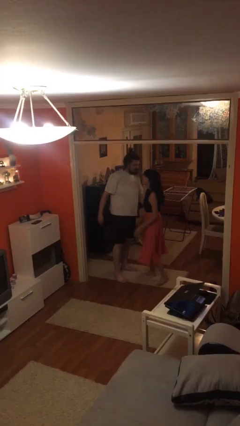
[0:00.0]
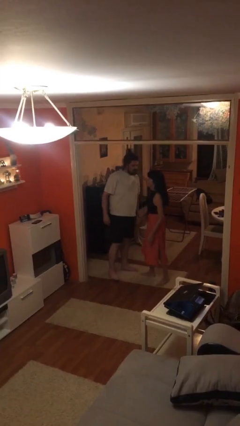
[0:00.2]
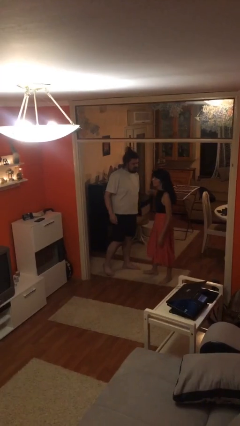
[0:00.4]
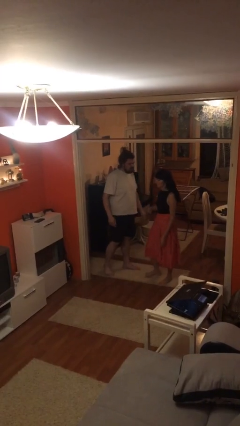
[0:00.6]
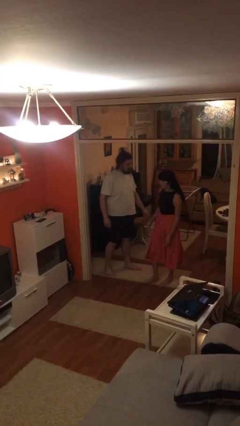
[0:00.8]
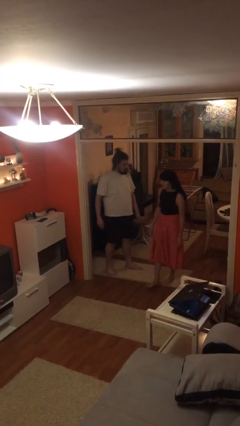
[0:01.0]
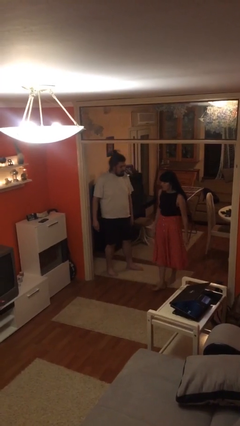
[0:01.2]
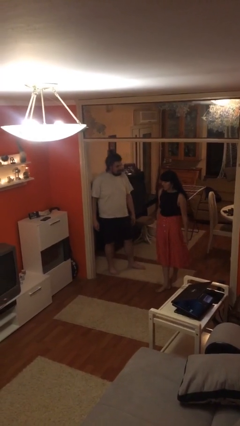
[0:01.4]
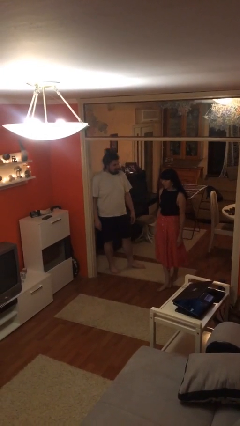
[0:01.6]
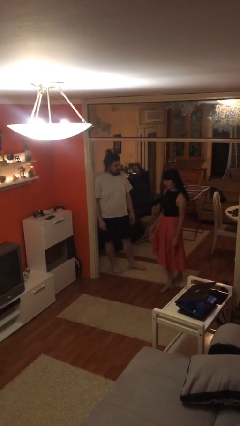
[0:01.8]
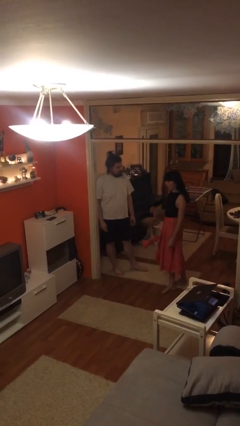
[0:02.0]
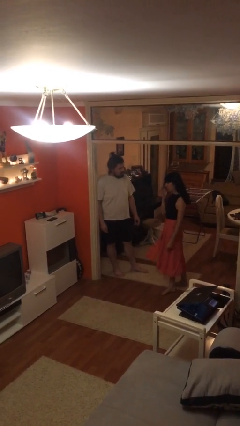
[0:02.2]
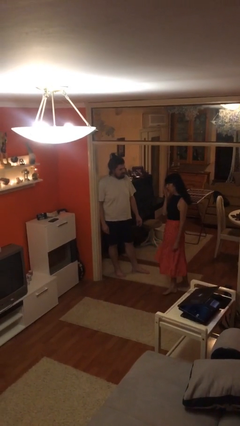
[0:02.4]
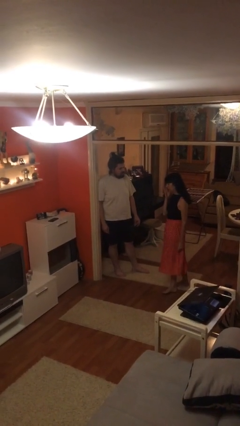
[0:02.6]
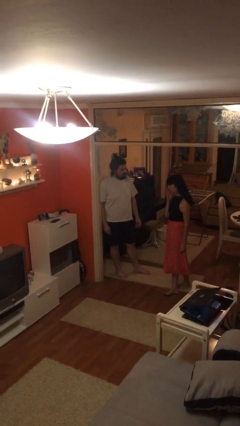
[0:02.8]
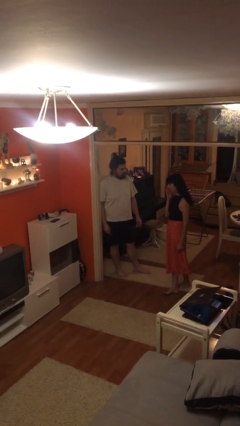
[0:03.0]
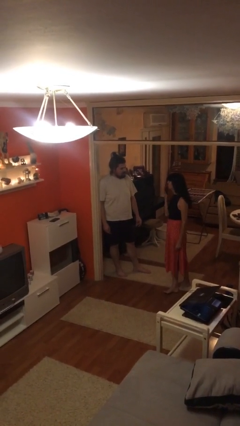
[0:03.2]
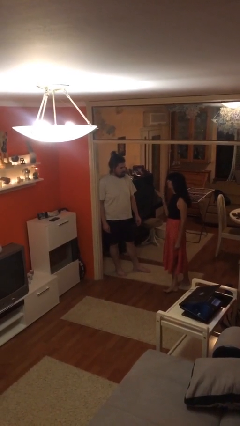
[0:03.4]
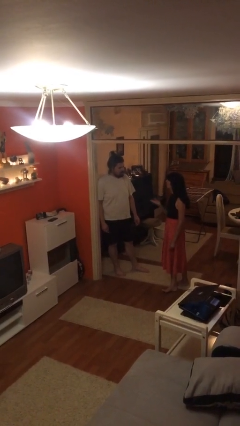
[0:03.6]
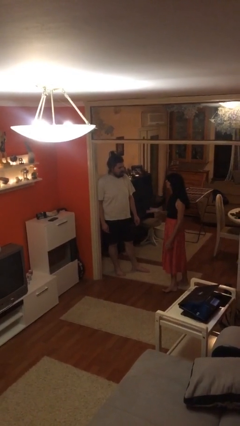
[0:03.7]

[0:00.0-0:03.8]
person talks to person

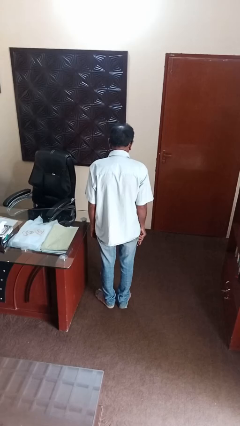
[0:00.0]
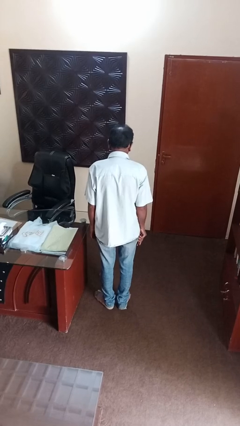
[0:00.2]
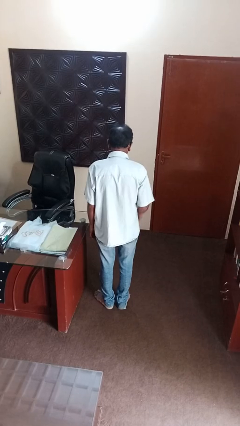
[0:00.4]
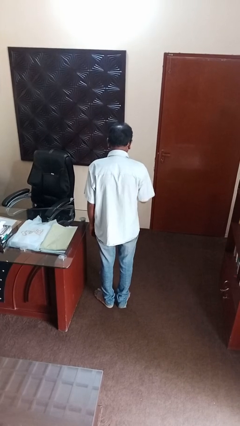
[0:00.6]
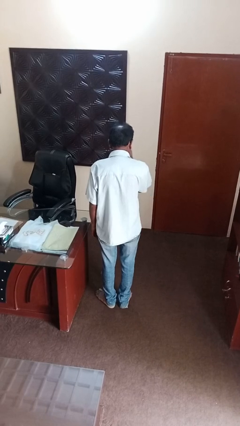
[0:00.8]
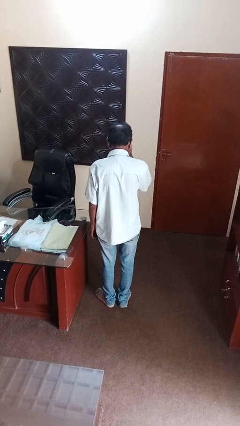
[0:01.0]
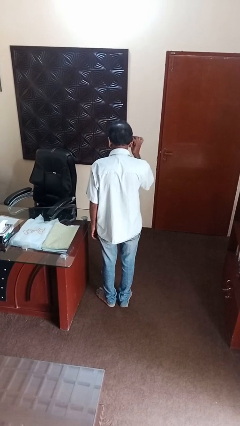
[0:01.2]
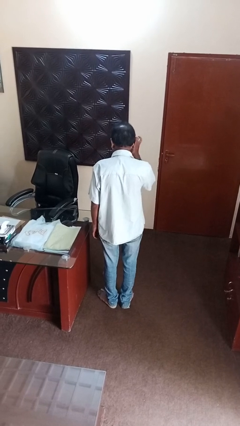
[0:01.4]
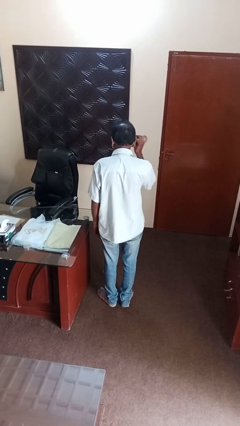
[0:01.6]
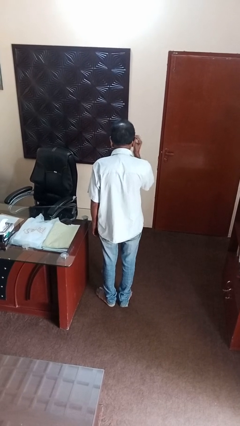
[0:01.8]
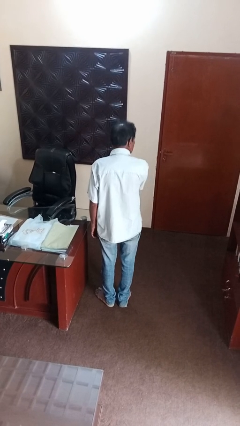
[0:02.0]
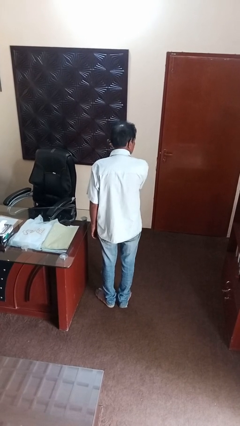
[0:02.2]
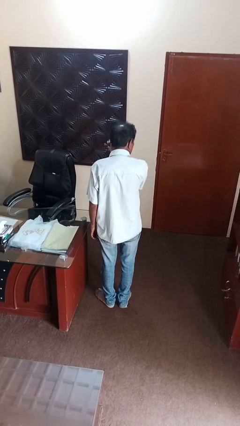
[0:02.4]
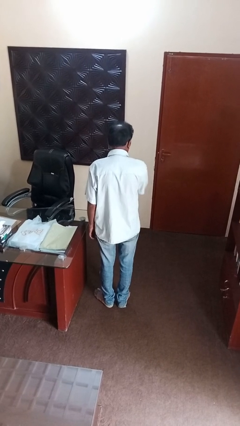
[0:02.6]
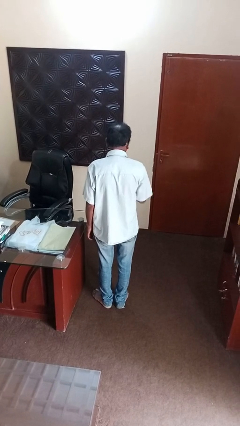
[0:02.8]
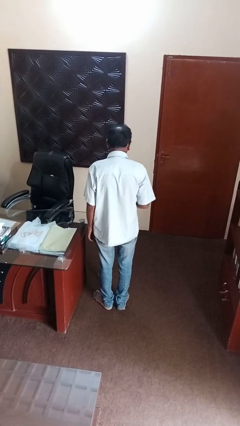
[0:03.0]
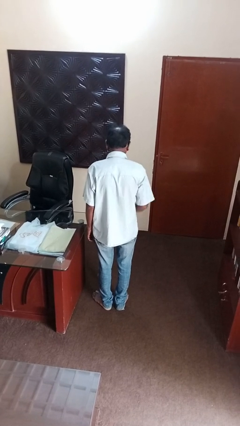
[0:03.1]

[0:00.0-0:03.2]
person applies eye makeup

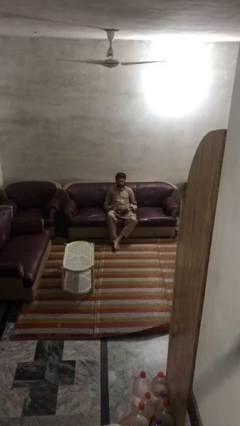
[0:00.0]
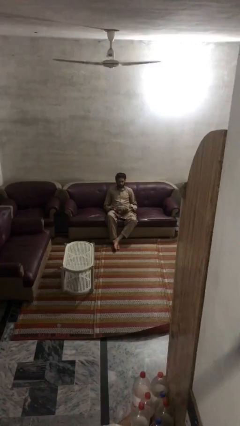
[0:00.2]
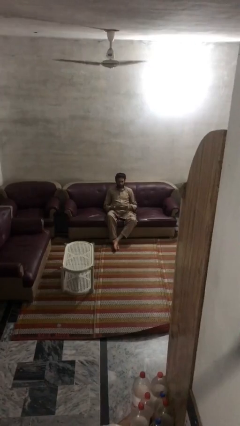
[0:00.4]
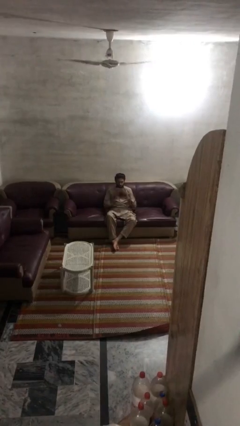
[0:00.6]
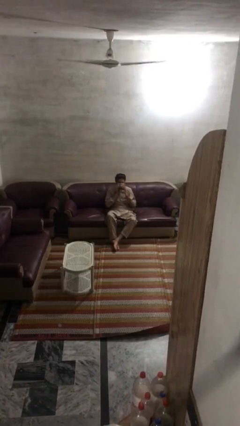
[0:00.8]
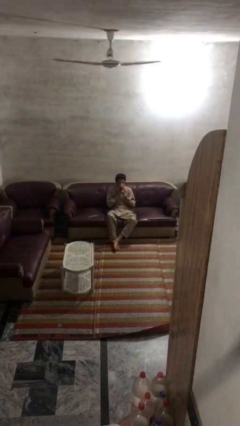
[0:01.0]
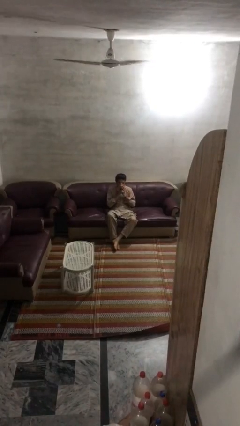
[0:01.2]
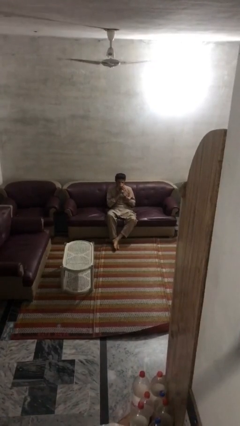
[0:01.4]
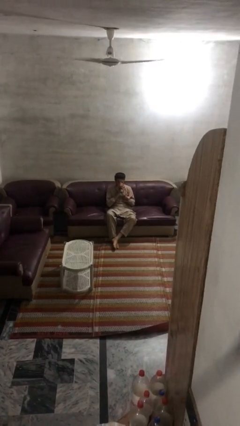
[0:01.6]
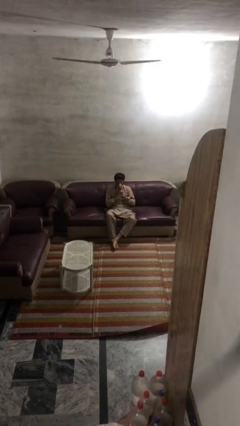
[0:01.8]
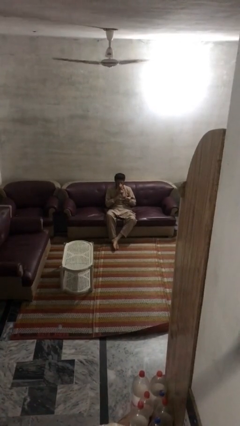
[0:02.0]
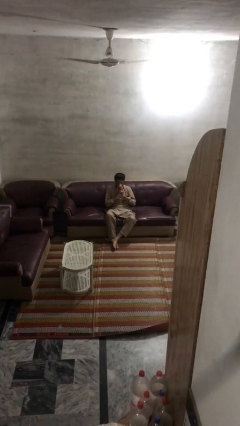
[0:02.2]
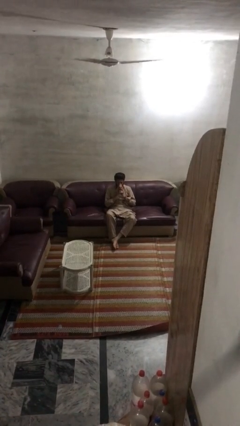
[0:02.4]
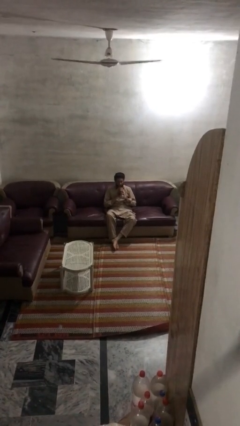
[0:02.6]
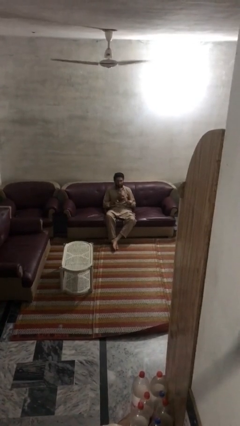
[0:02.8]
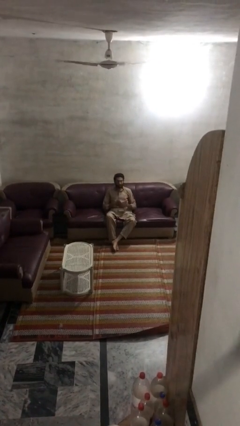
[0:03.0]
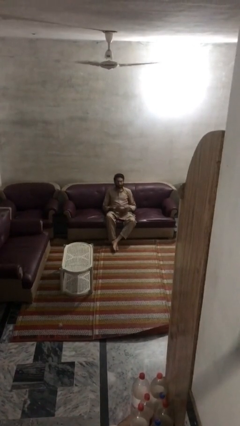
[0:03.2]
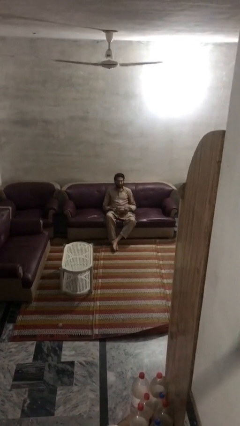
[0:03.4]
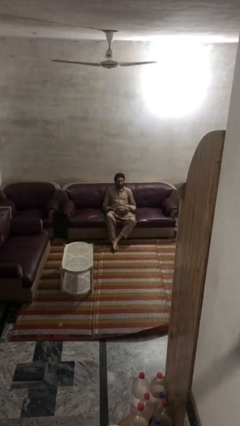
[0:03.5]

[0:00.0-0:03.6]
person blows nose

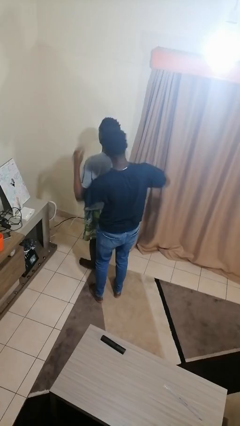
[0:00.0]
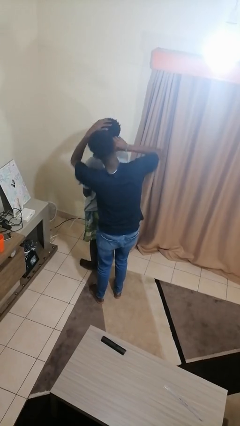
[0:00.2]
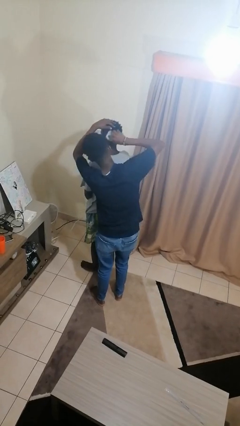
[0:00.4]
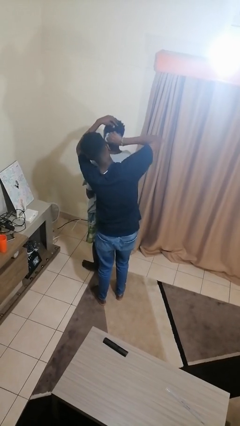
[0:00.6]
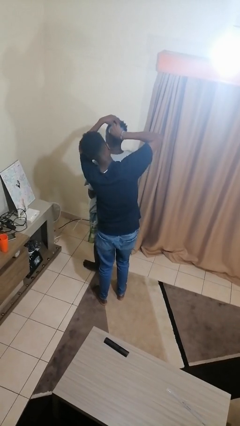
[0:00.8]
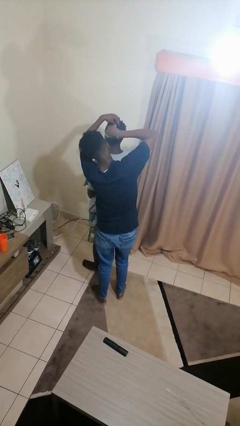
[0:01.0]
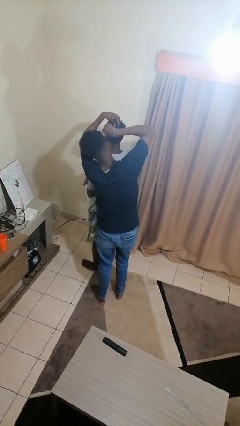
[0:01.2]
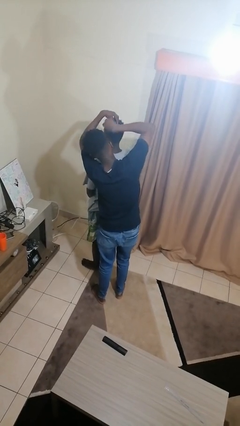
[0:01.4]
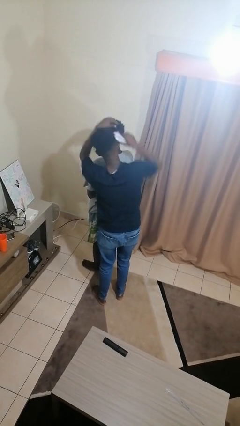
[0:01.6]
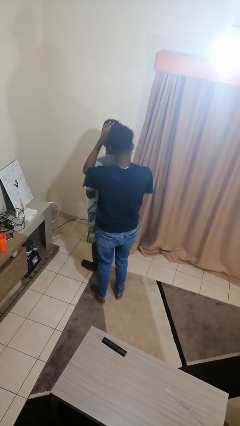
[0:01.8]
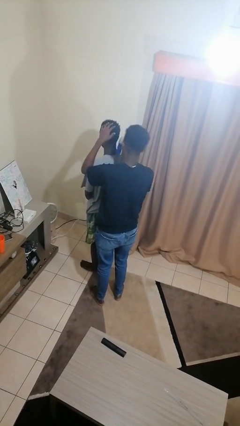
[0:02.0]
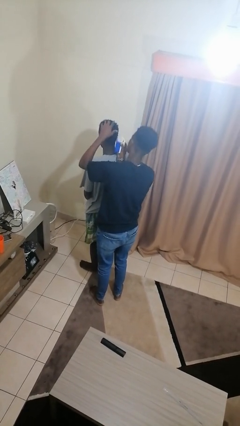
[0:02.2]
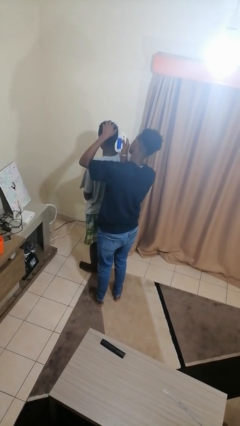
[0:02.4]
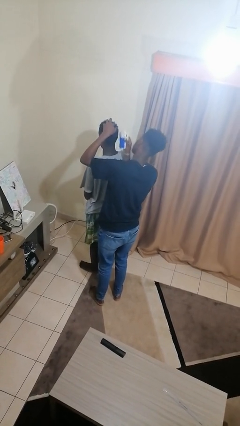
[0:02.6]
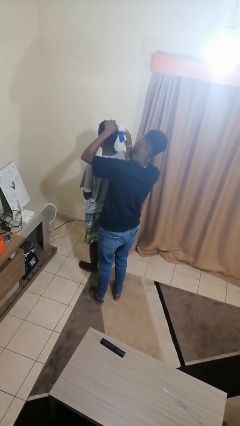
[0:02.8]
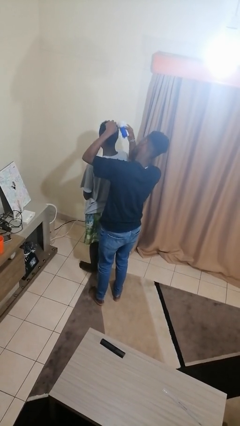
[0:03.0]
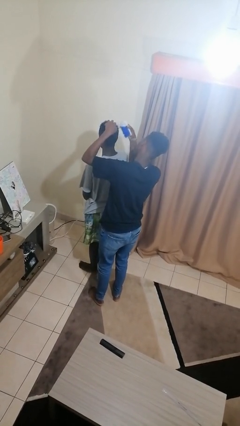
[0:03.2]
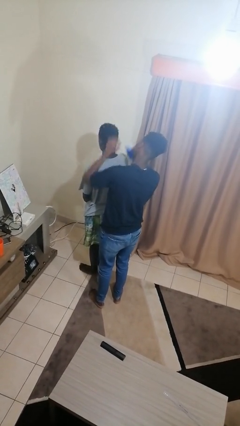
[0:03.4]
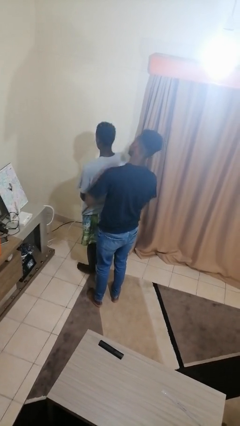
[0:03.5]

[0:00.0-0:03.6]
person brushes hair of person

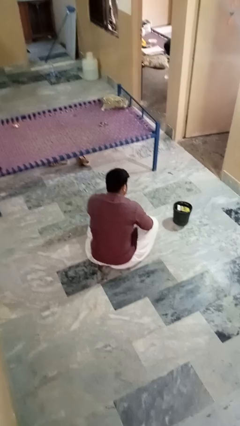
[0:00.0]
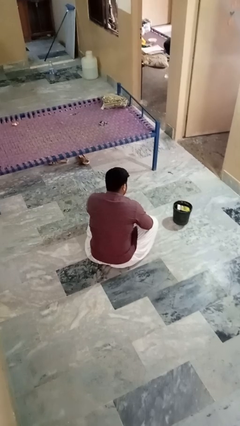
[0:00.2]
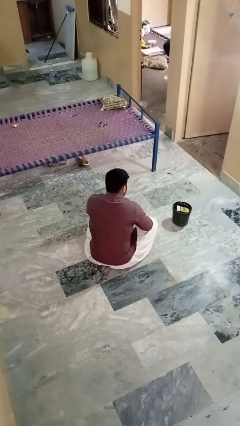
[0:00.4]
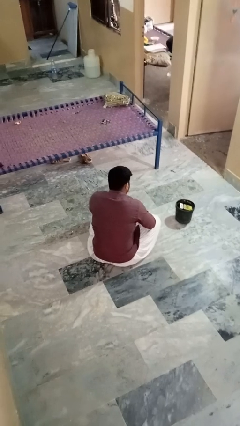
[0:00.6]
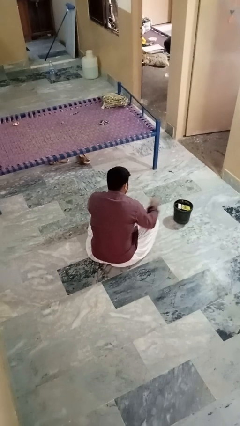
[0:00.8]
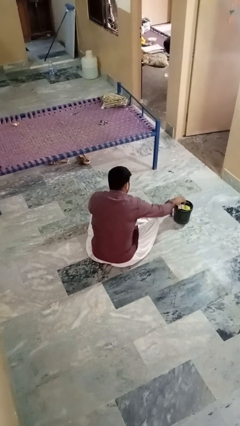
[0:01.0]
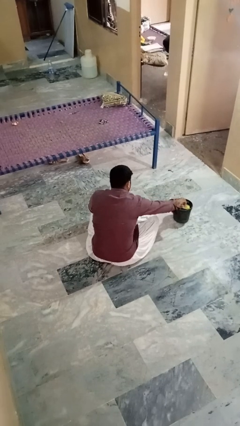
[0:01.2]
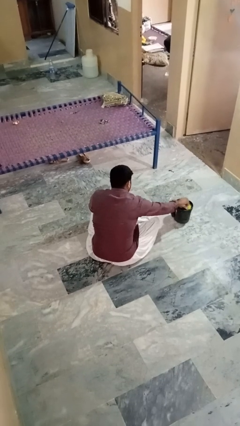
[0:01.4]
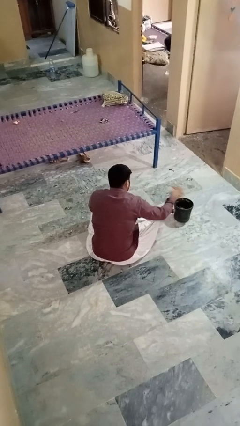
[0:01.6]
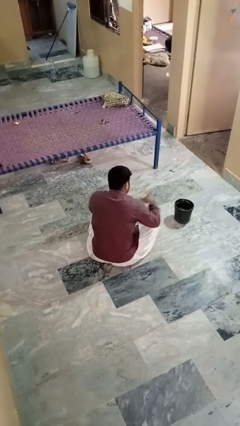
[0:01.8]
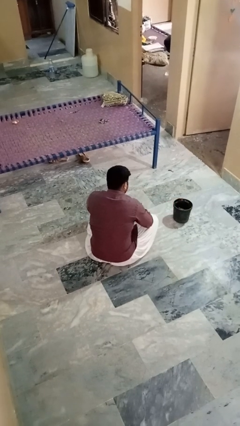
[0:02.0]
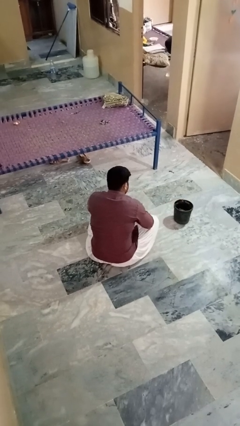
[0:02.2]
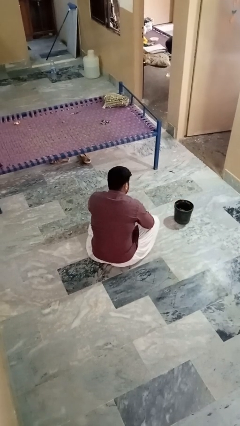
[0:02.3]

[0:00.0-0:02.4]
person takes object from basket

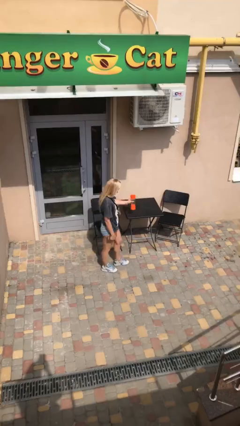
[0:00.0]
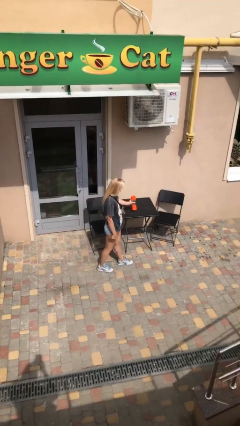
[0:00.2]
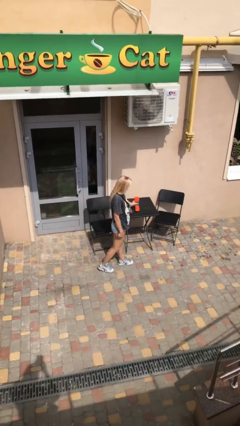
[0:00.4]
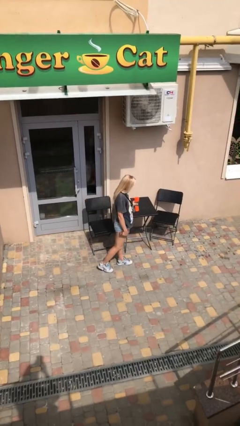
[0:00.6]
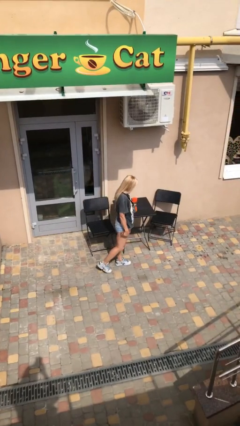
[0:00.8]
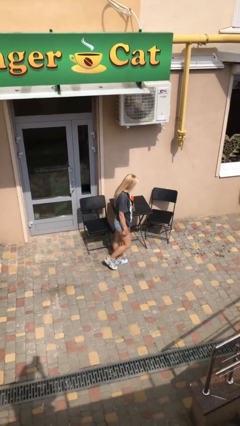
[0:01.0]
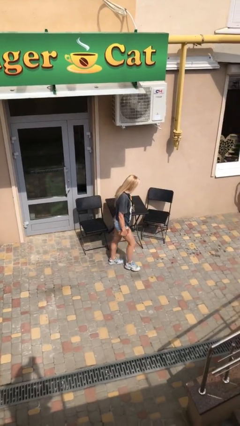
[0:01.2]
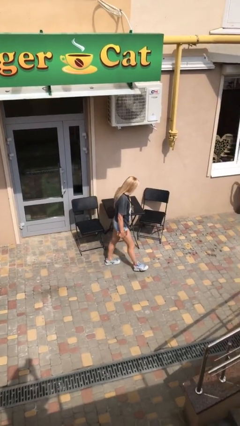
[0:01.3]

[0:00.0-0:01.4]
person puts down object on table
